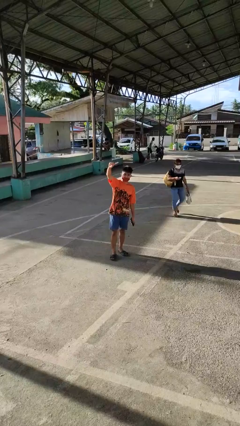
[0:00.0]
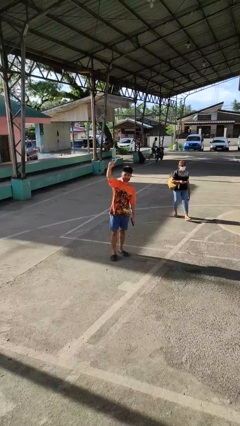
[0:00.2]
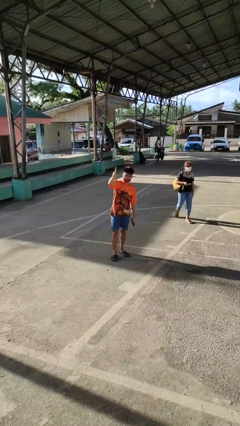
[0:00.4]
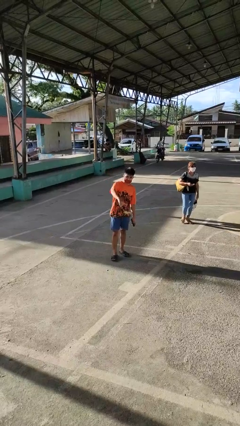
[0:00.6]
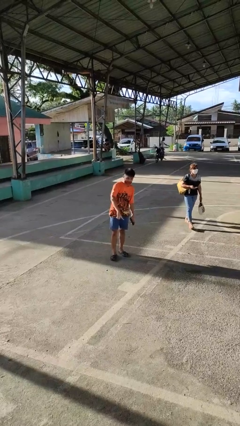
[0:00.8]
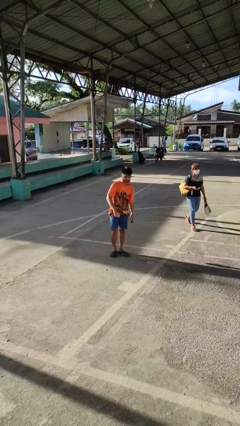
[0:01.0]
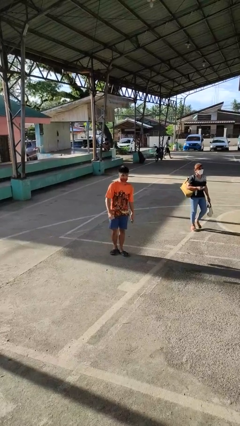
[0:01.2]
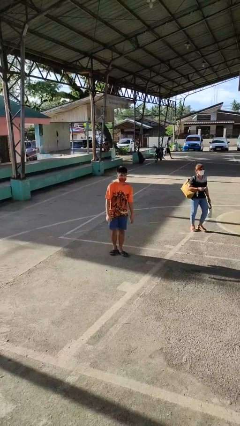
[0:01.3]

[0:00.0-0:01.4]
person gestures swipe down

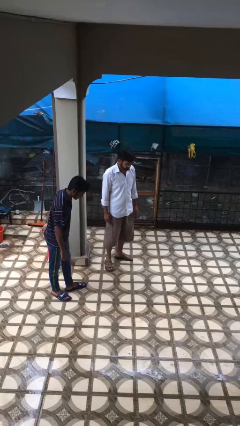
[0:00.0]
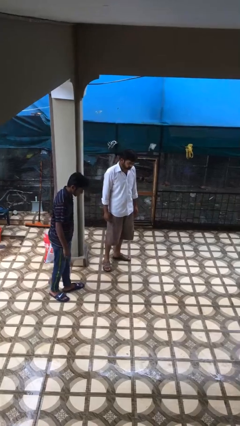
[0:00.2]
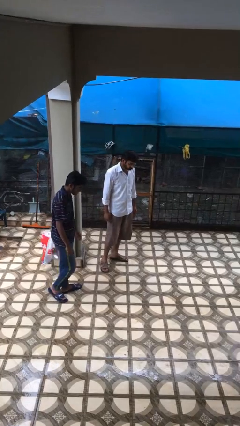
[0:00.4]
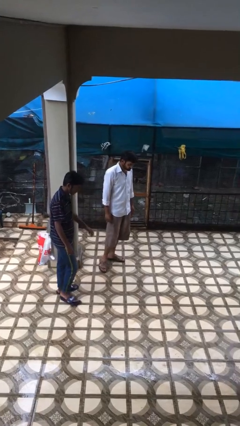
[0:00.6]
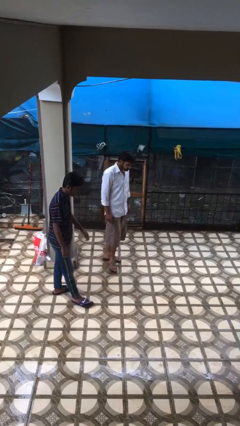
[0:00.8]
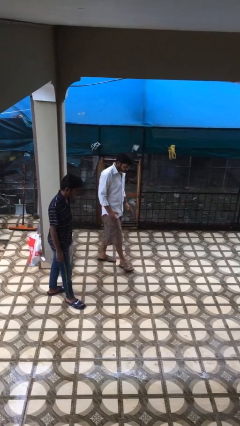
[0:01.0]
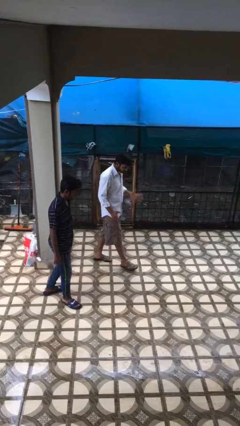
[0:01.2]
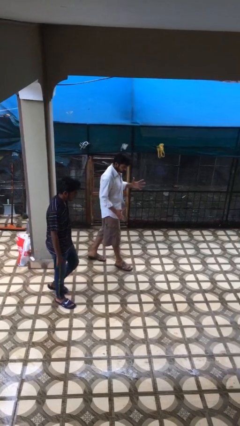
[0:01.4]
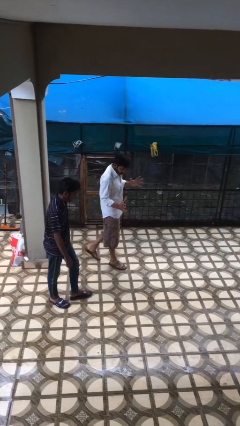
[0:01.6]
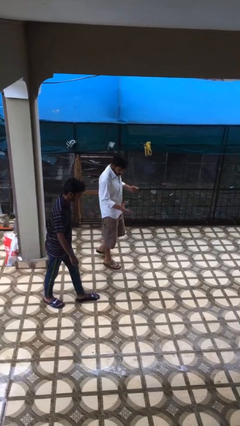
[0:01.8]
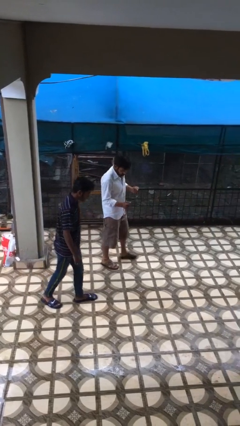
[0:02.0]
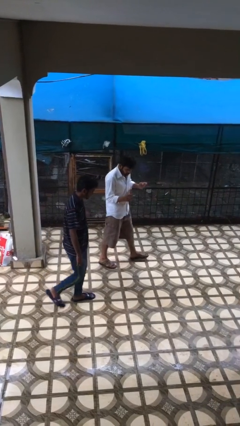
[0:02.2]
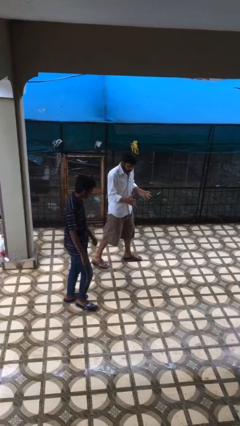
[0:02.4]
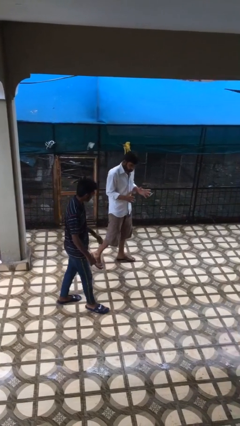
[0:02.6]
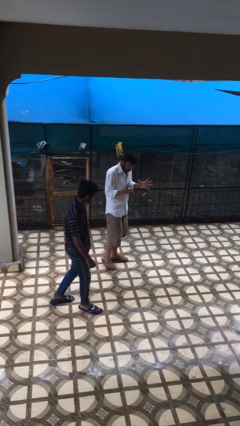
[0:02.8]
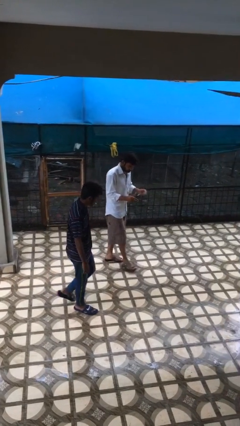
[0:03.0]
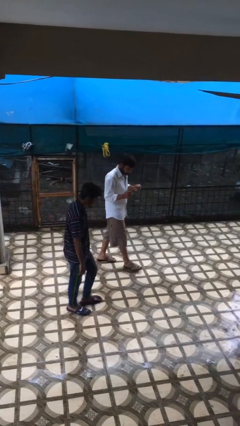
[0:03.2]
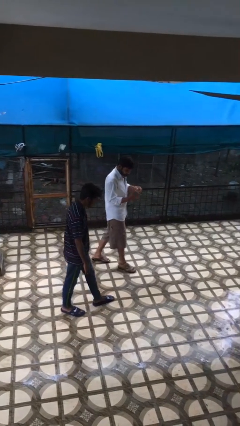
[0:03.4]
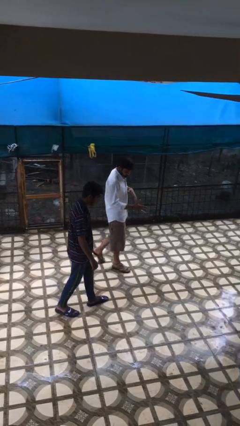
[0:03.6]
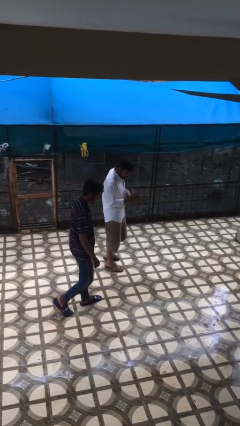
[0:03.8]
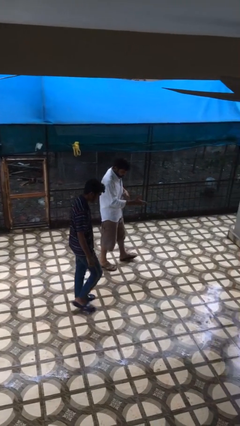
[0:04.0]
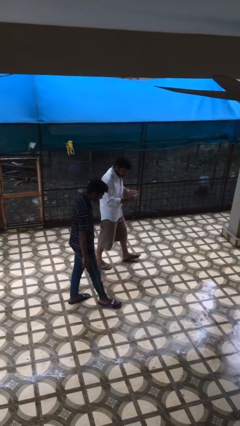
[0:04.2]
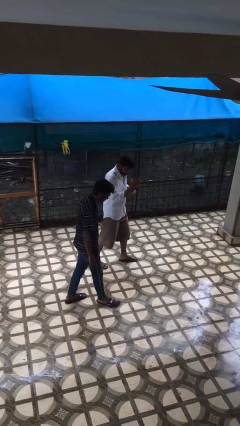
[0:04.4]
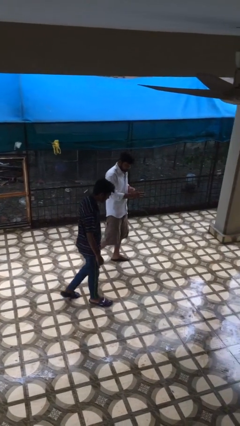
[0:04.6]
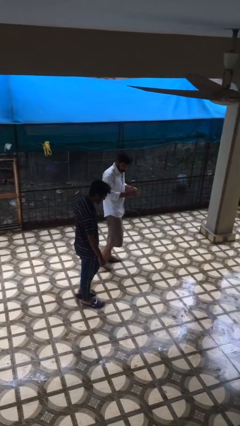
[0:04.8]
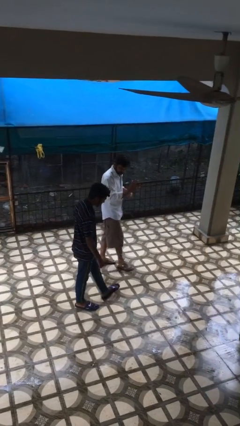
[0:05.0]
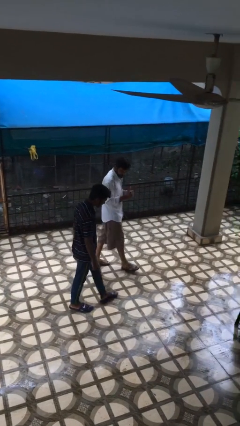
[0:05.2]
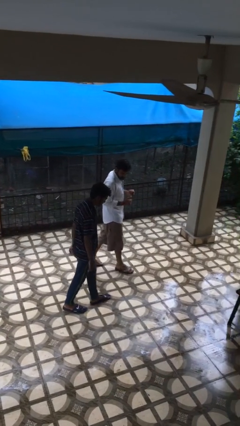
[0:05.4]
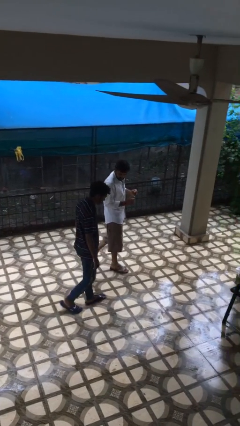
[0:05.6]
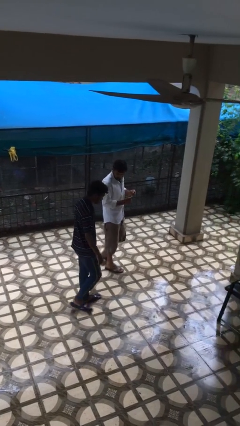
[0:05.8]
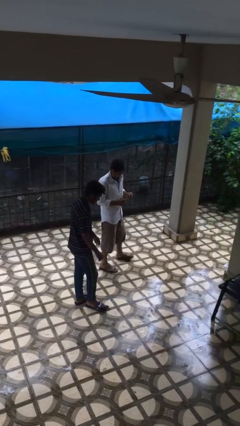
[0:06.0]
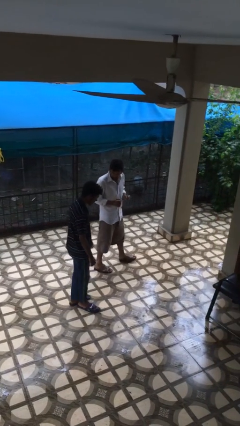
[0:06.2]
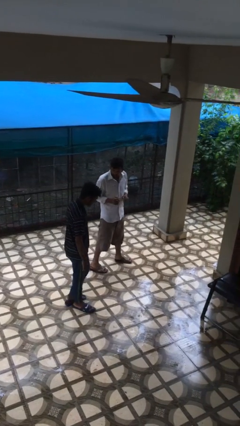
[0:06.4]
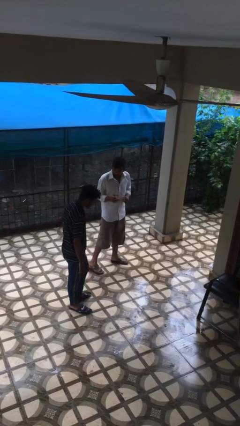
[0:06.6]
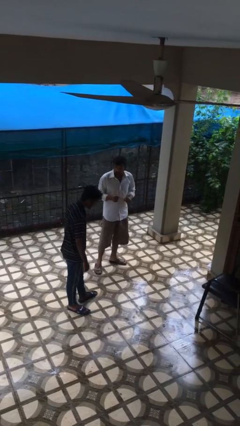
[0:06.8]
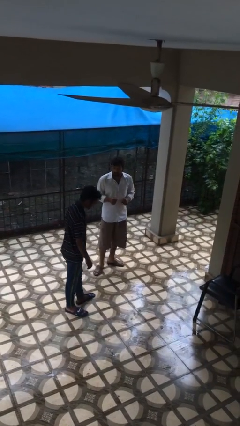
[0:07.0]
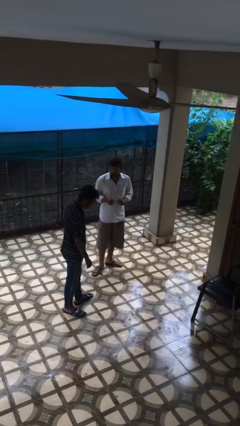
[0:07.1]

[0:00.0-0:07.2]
person talks to person

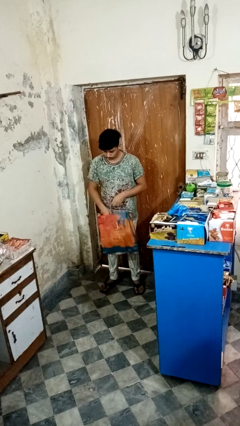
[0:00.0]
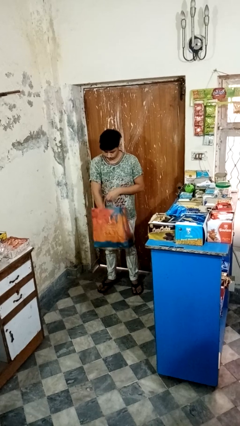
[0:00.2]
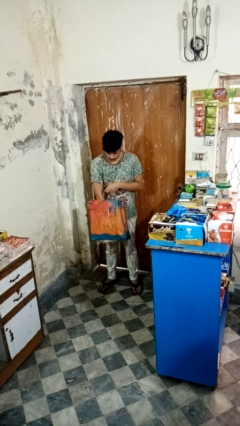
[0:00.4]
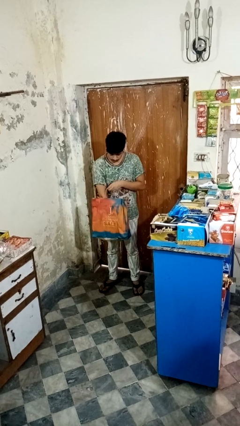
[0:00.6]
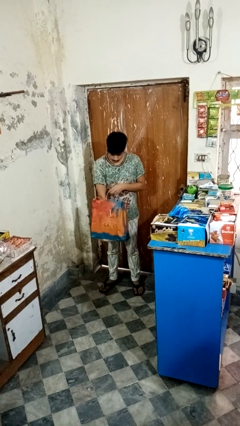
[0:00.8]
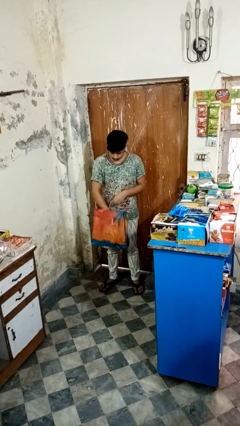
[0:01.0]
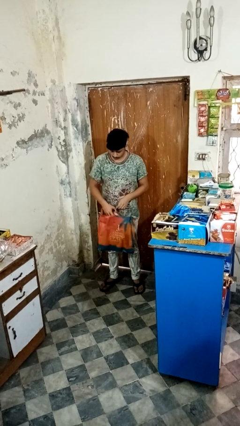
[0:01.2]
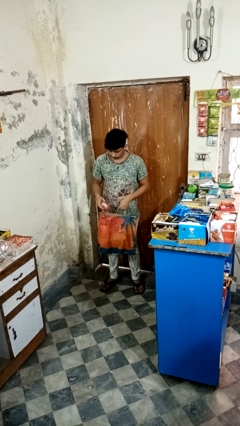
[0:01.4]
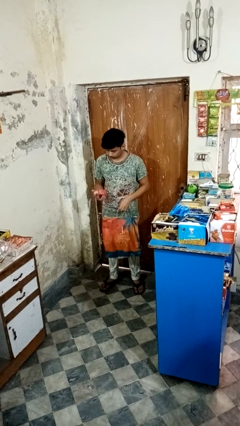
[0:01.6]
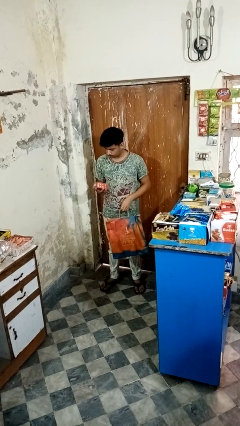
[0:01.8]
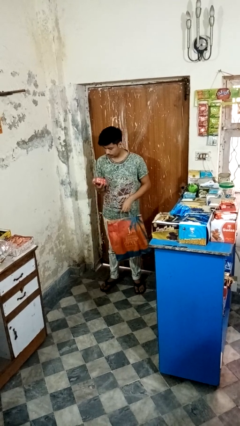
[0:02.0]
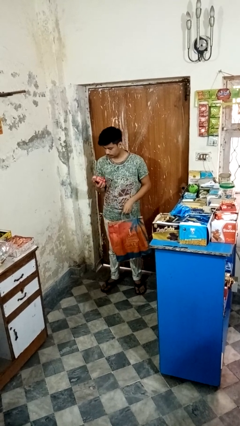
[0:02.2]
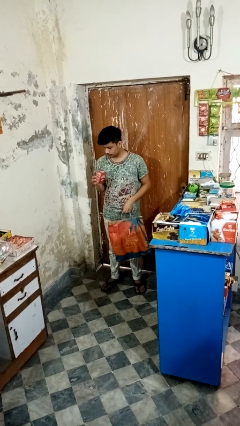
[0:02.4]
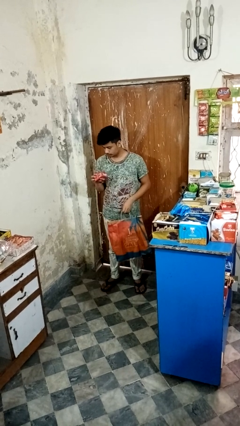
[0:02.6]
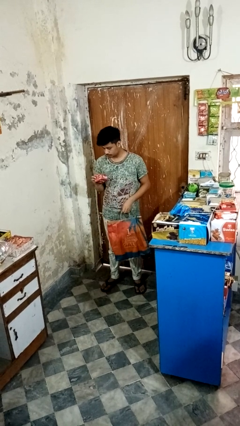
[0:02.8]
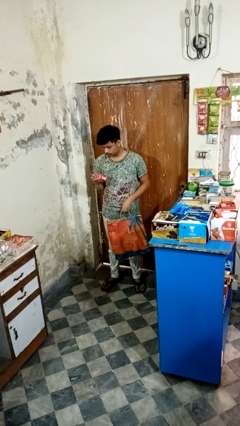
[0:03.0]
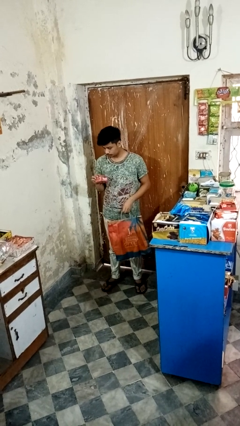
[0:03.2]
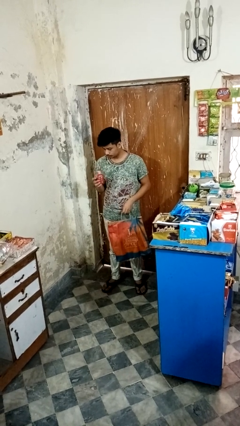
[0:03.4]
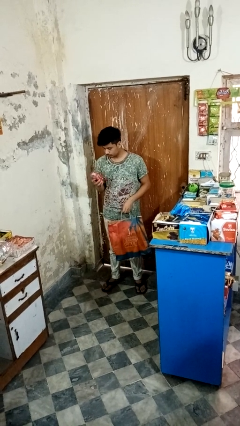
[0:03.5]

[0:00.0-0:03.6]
person takes object from bag

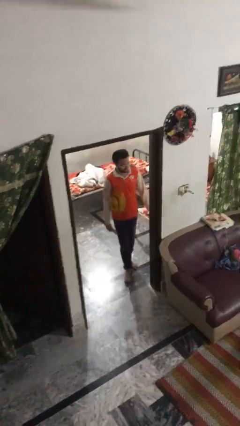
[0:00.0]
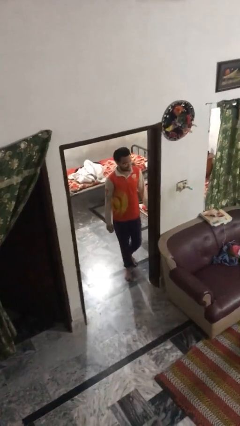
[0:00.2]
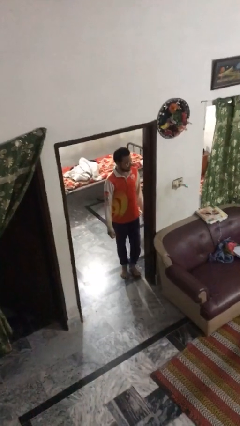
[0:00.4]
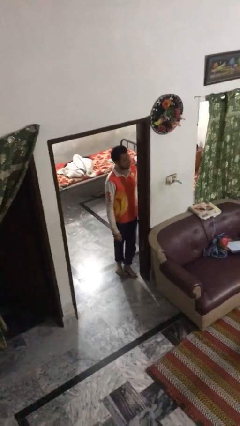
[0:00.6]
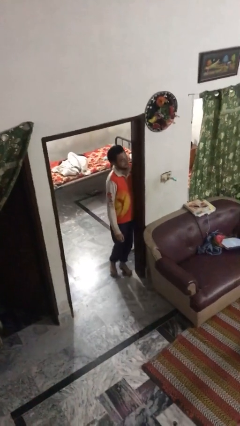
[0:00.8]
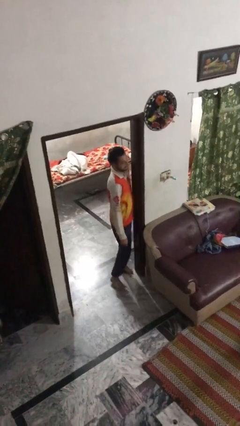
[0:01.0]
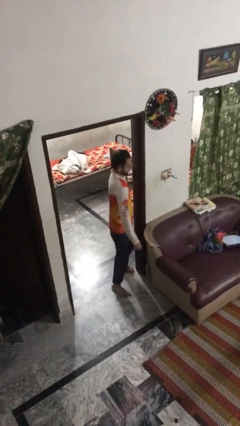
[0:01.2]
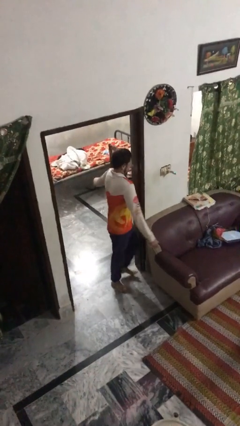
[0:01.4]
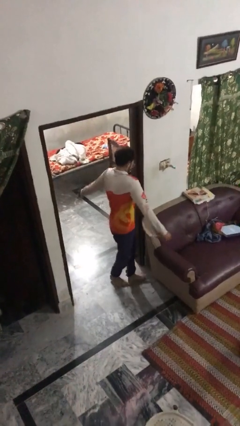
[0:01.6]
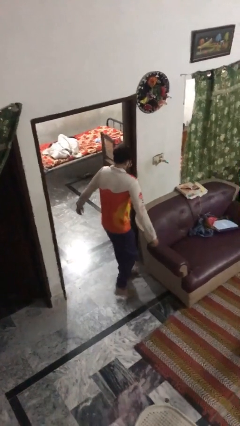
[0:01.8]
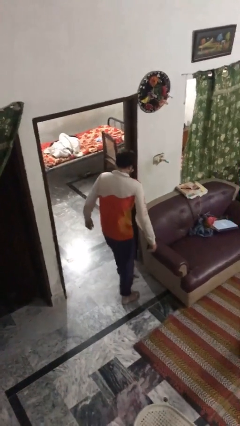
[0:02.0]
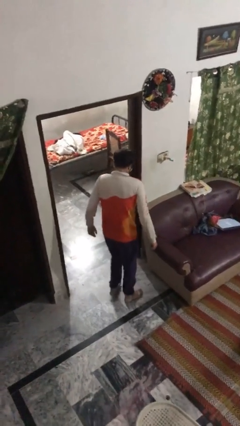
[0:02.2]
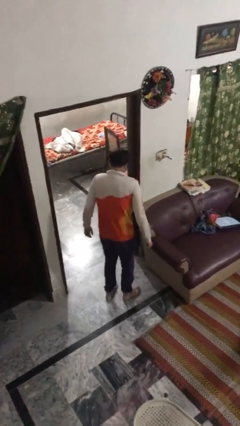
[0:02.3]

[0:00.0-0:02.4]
person bumps into wall

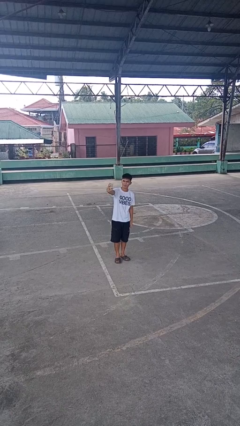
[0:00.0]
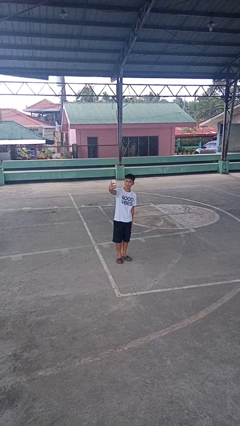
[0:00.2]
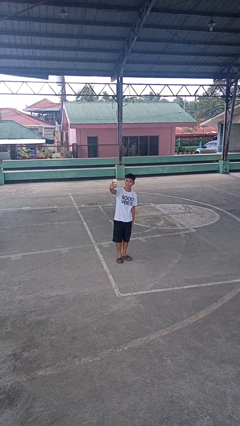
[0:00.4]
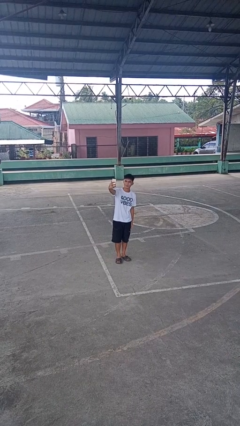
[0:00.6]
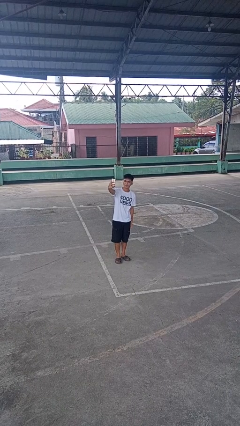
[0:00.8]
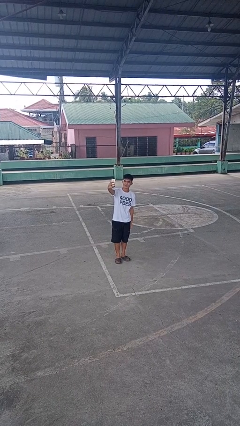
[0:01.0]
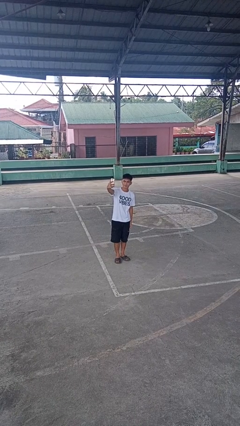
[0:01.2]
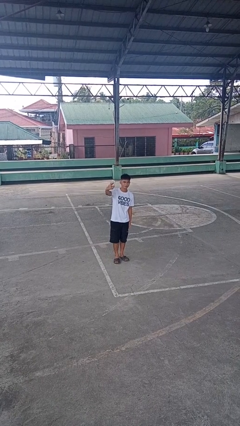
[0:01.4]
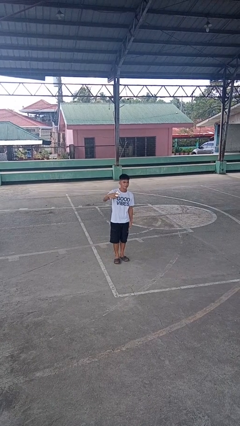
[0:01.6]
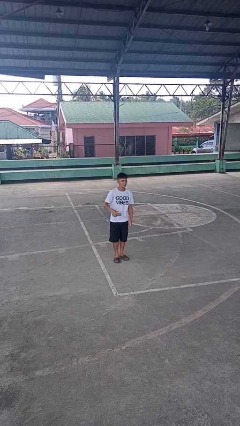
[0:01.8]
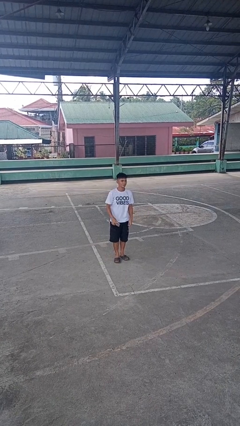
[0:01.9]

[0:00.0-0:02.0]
person takes selfie

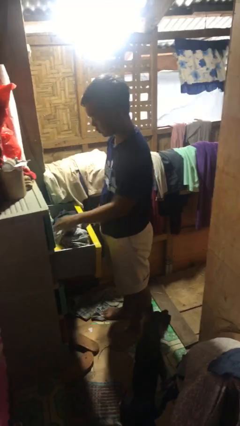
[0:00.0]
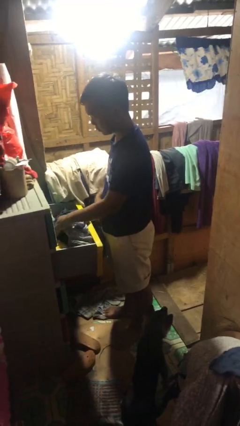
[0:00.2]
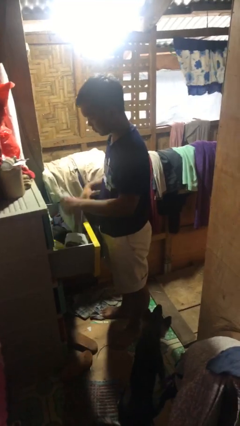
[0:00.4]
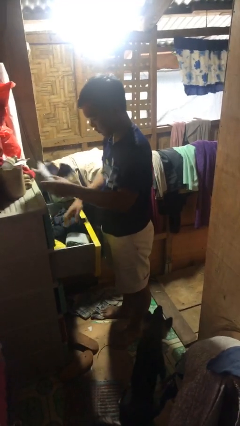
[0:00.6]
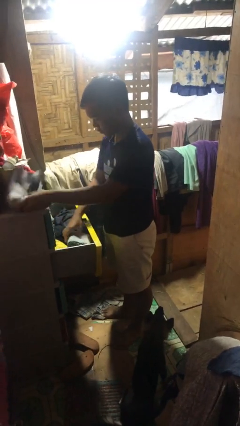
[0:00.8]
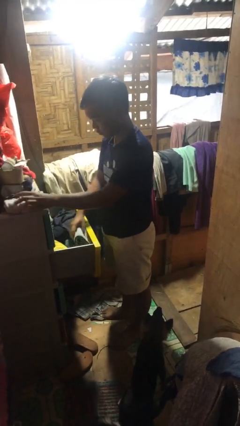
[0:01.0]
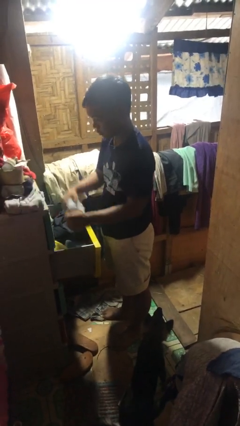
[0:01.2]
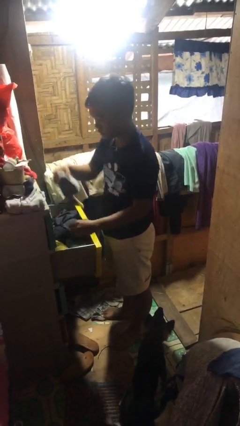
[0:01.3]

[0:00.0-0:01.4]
person takes clothes from dresser
